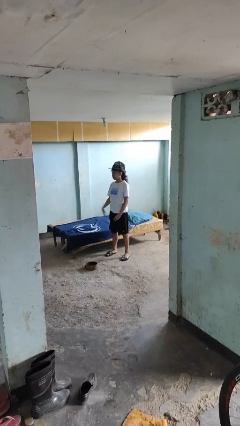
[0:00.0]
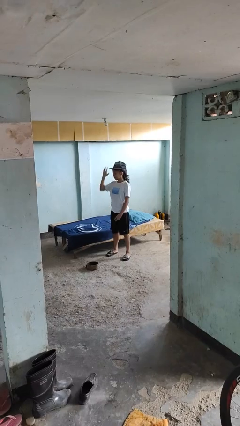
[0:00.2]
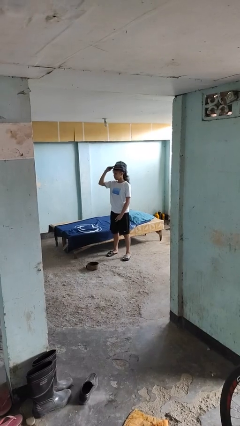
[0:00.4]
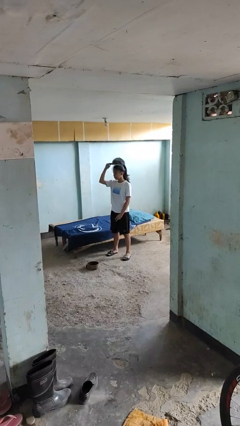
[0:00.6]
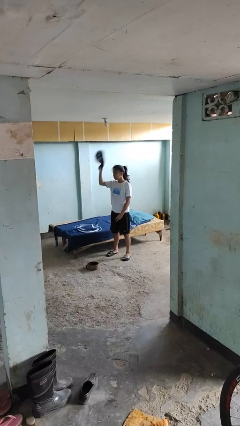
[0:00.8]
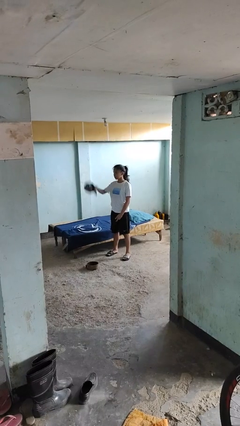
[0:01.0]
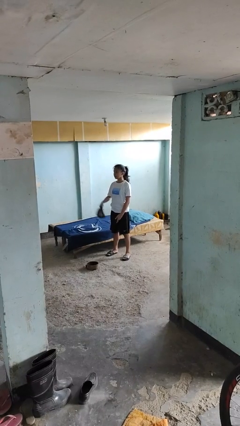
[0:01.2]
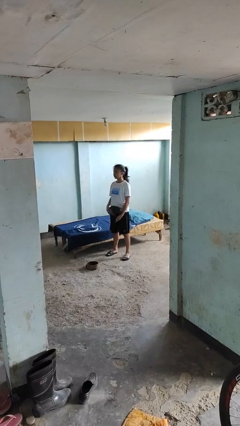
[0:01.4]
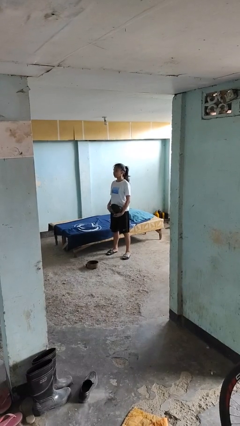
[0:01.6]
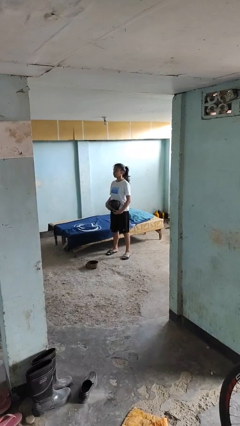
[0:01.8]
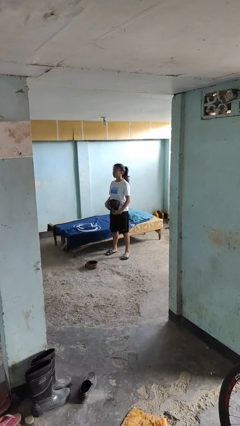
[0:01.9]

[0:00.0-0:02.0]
person takes off hat

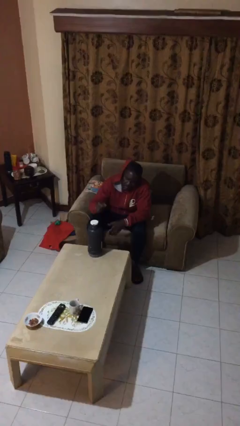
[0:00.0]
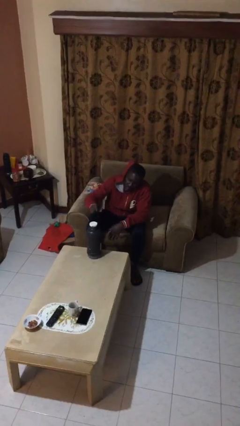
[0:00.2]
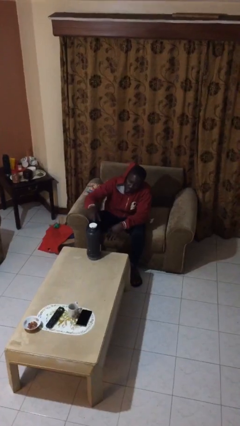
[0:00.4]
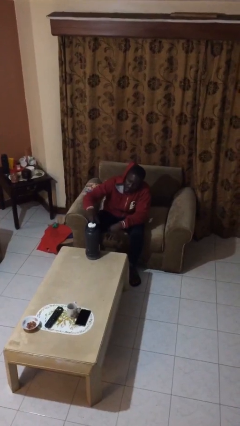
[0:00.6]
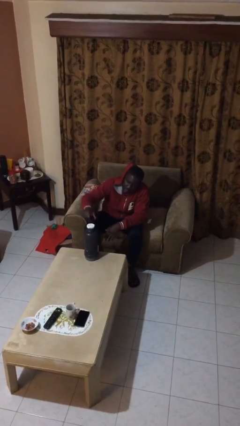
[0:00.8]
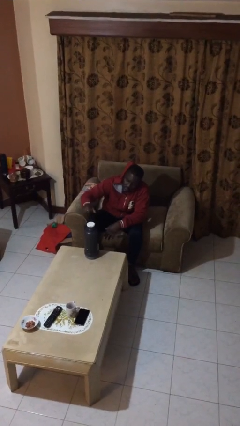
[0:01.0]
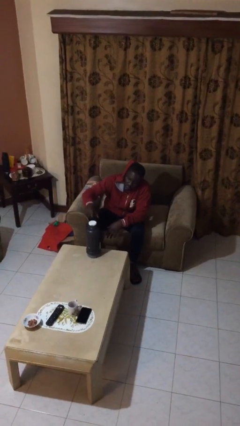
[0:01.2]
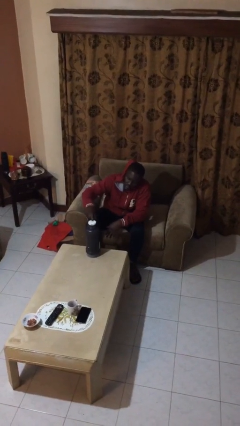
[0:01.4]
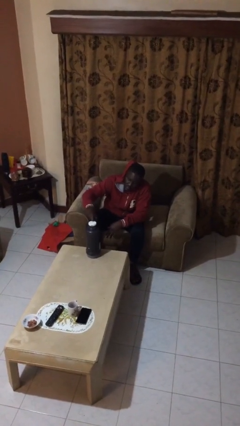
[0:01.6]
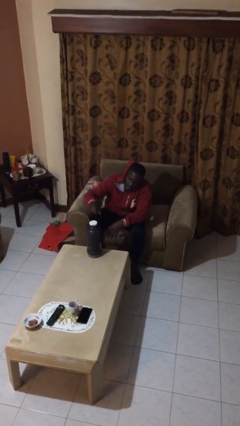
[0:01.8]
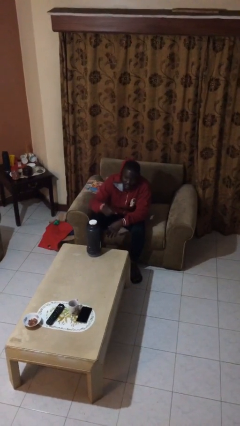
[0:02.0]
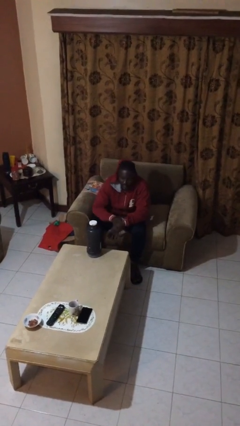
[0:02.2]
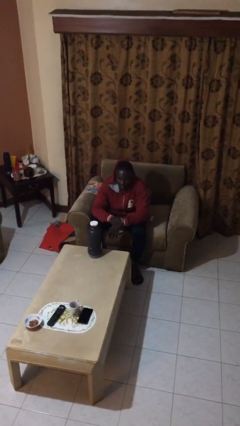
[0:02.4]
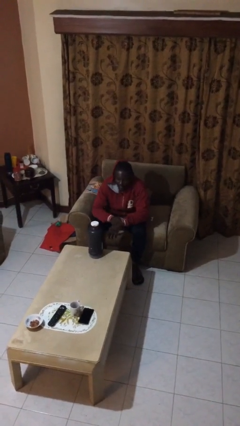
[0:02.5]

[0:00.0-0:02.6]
person taps object with finger

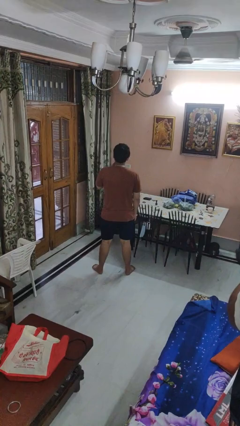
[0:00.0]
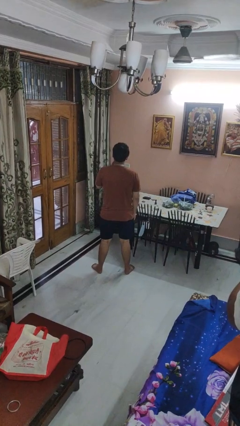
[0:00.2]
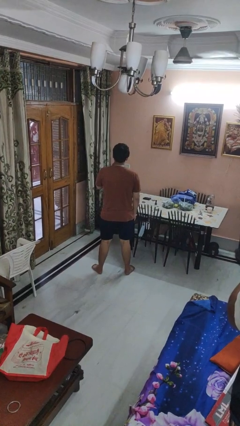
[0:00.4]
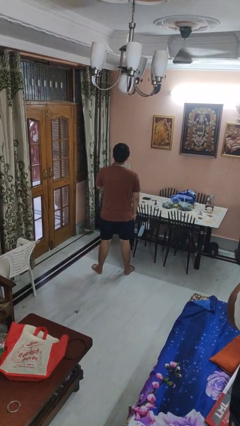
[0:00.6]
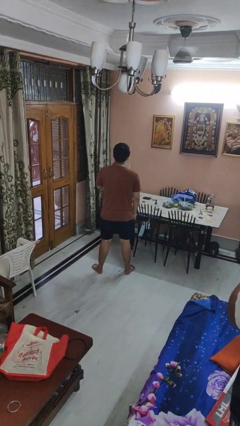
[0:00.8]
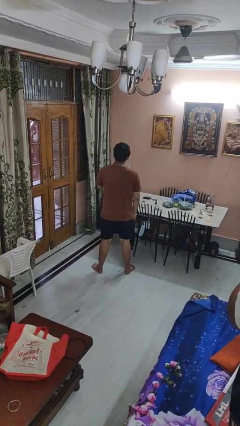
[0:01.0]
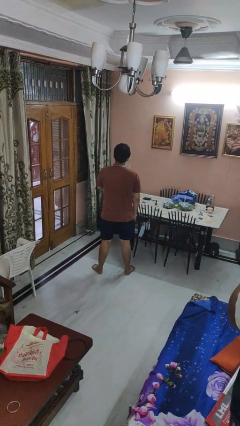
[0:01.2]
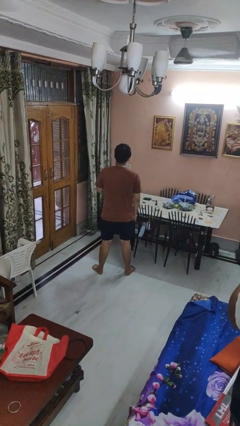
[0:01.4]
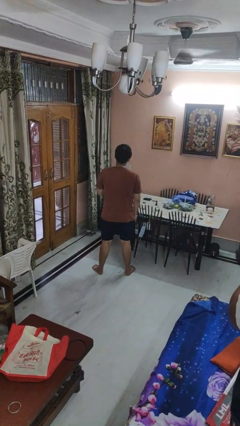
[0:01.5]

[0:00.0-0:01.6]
person strokes chin

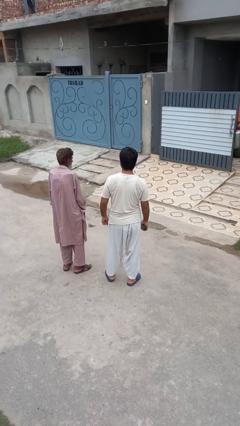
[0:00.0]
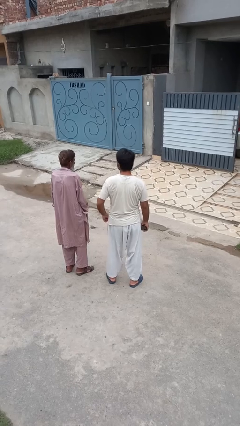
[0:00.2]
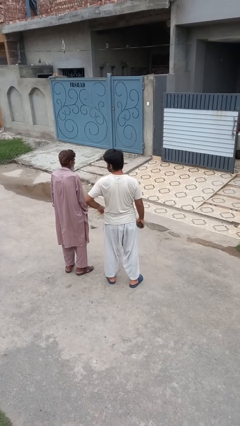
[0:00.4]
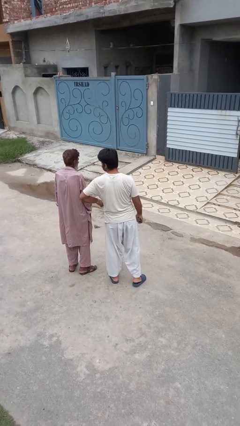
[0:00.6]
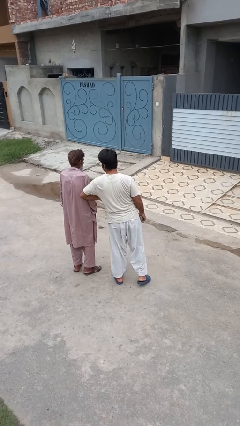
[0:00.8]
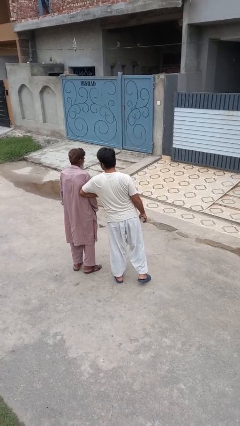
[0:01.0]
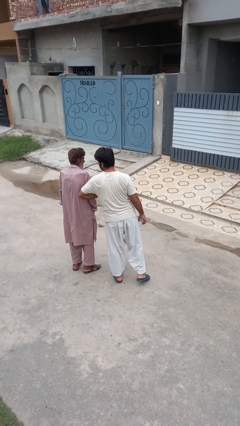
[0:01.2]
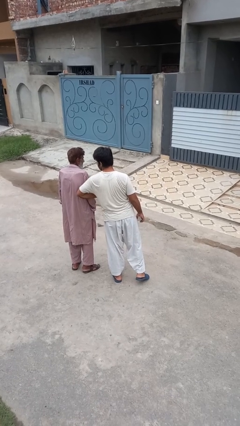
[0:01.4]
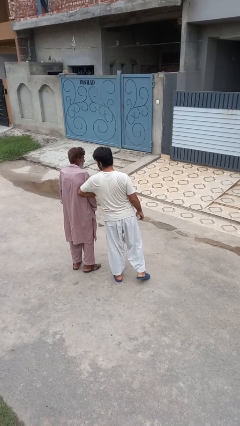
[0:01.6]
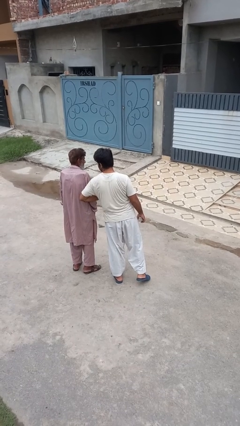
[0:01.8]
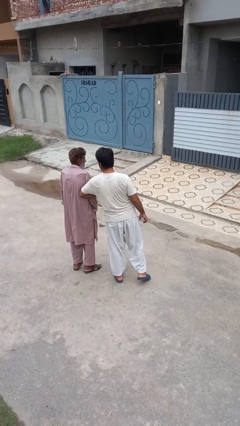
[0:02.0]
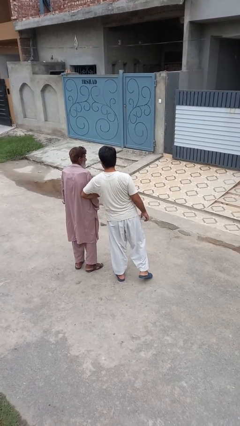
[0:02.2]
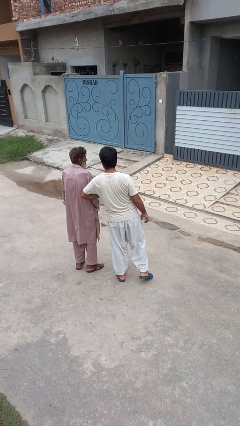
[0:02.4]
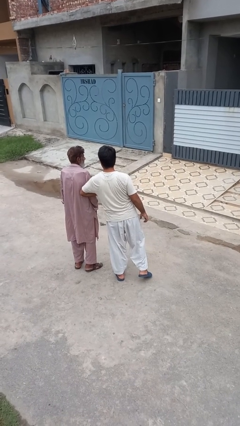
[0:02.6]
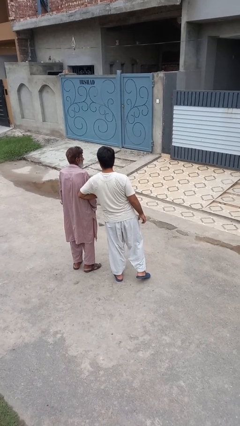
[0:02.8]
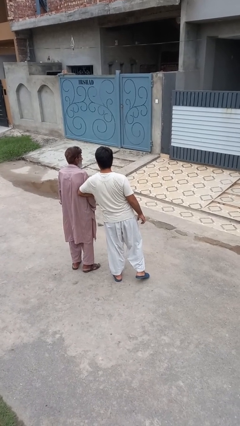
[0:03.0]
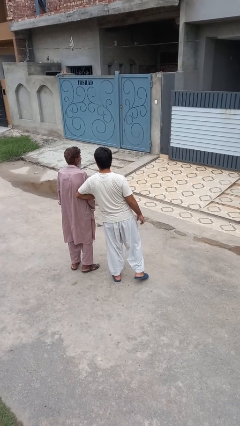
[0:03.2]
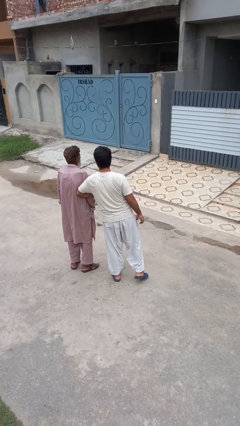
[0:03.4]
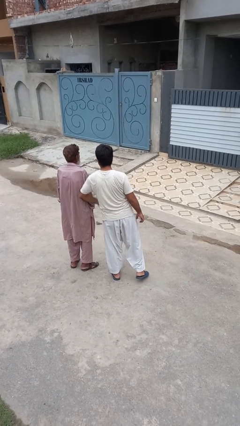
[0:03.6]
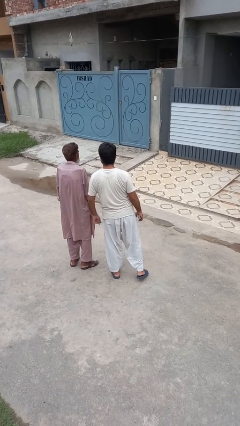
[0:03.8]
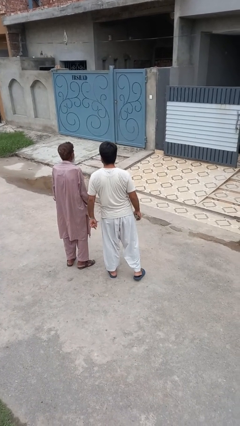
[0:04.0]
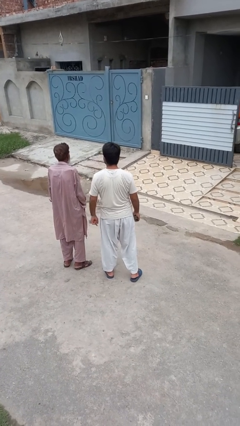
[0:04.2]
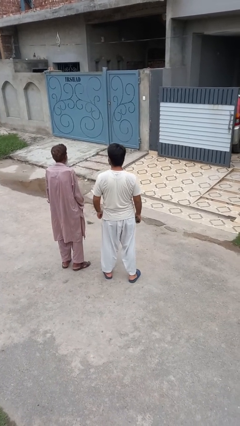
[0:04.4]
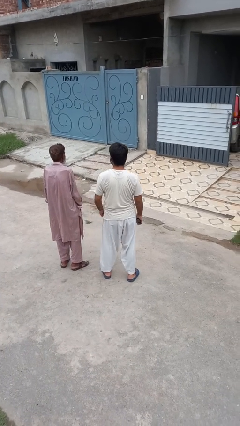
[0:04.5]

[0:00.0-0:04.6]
person nudges person with elbow

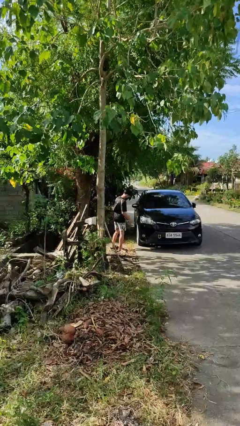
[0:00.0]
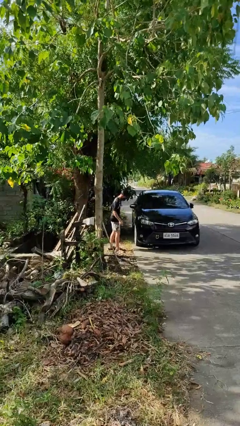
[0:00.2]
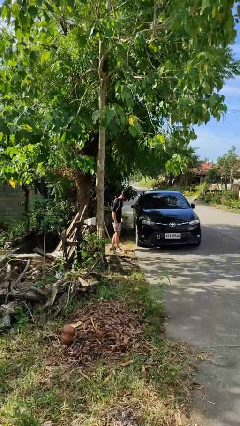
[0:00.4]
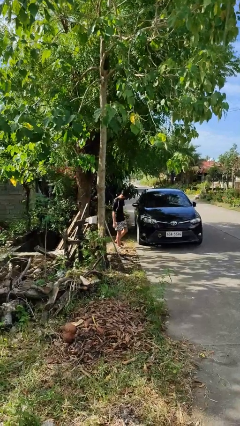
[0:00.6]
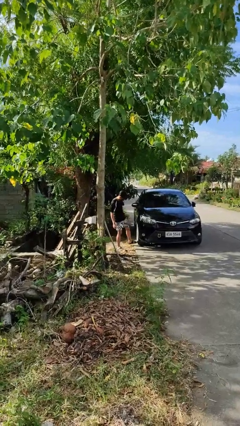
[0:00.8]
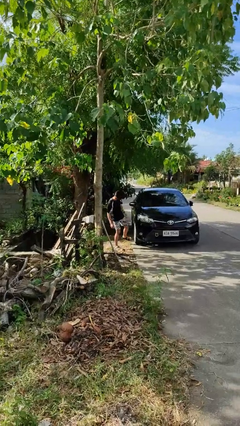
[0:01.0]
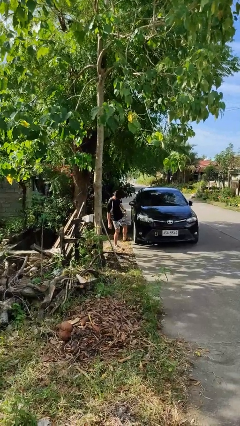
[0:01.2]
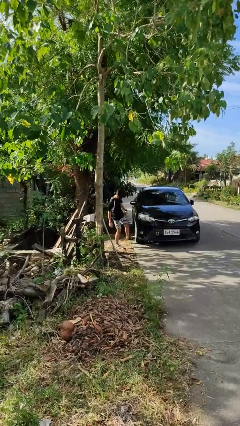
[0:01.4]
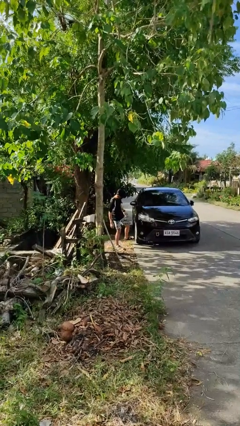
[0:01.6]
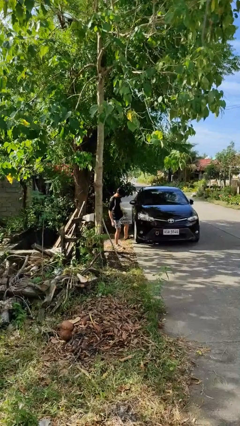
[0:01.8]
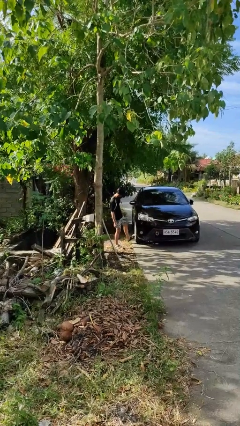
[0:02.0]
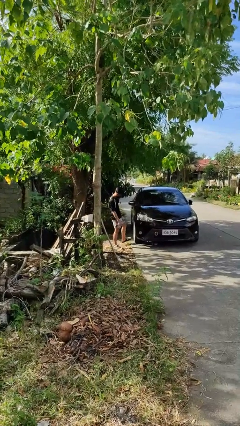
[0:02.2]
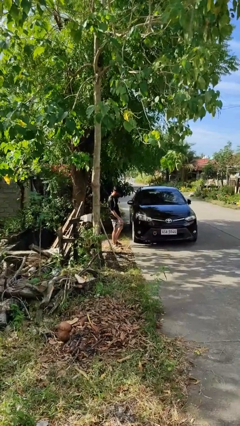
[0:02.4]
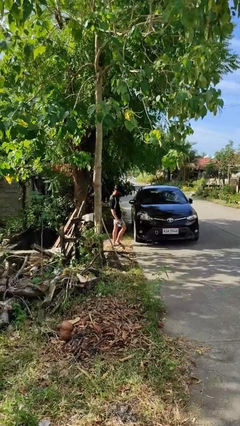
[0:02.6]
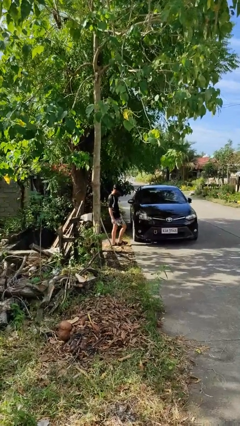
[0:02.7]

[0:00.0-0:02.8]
person kicks car tires

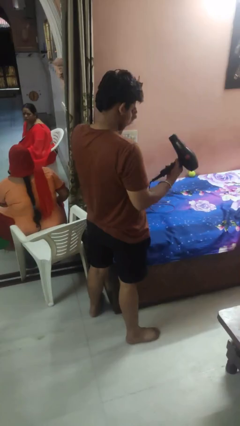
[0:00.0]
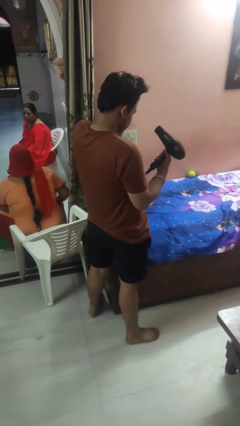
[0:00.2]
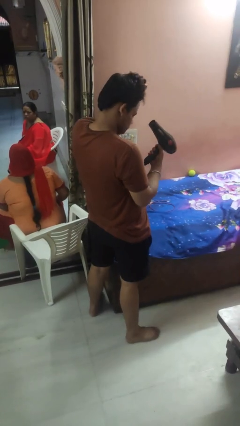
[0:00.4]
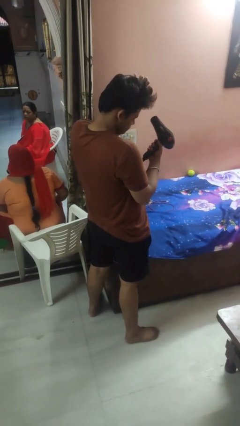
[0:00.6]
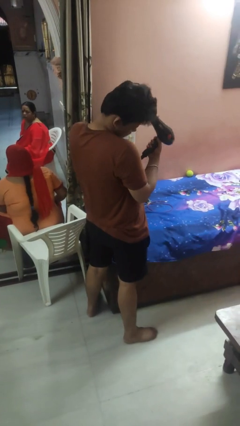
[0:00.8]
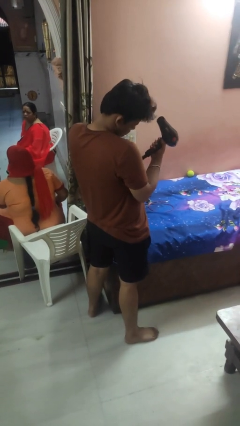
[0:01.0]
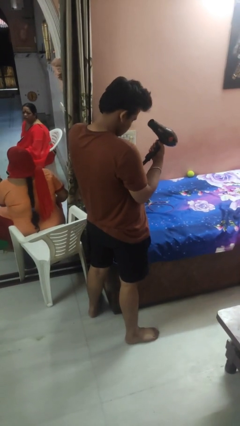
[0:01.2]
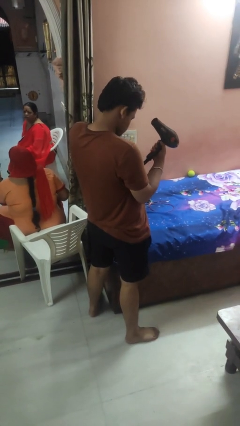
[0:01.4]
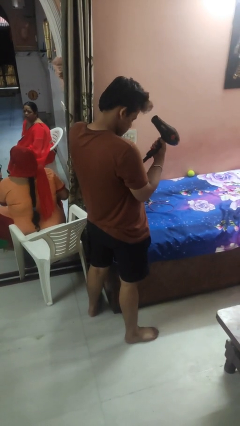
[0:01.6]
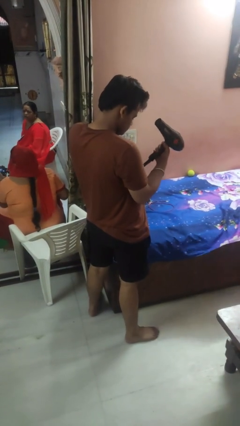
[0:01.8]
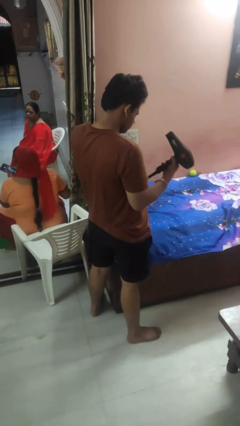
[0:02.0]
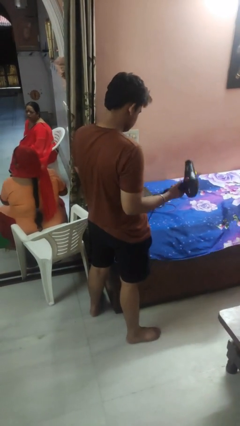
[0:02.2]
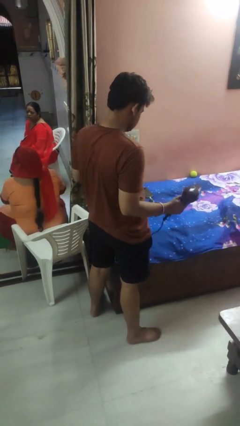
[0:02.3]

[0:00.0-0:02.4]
person dries hair with hairdryer

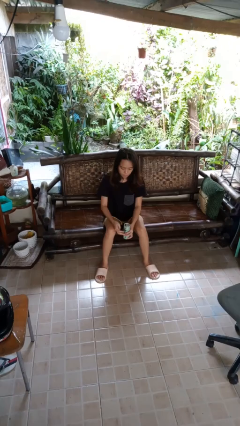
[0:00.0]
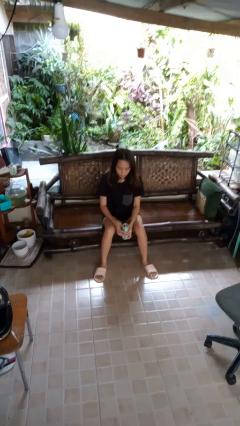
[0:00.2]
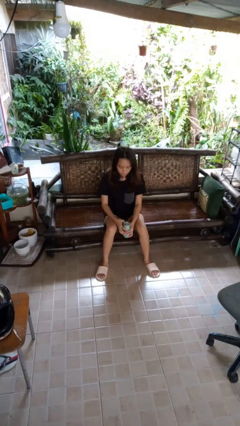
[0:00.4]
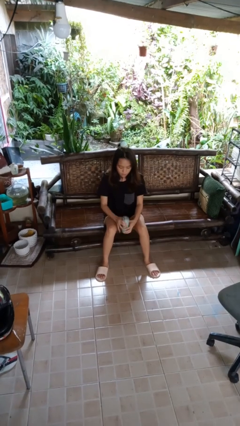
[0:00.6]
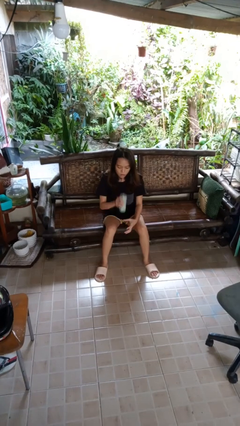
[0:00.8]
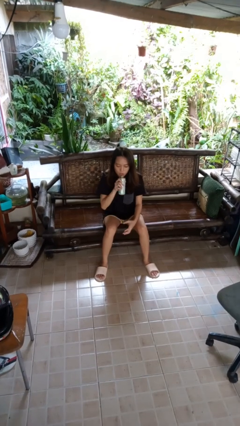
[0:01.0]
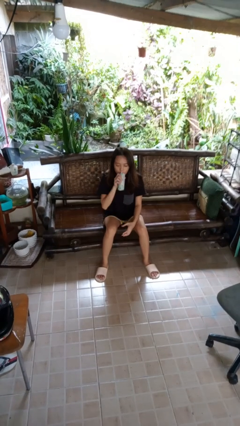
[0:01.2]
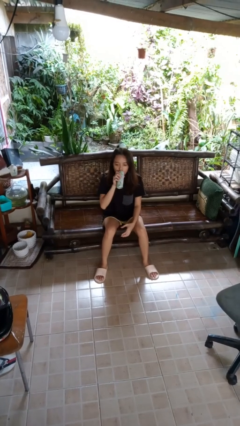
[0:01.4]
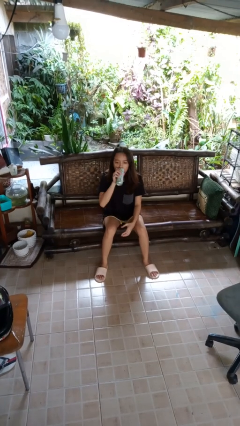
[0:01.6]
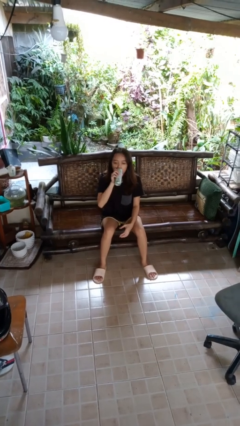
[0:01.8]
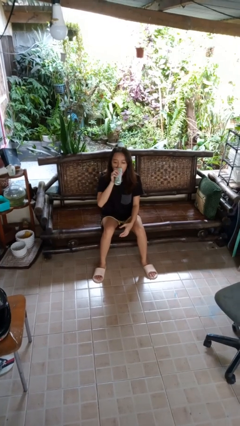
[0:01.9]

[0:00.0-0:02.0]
person drinks from beverage can
